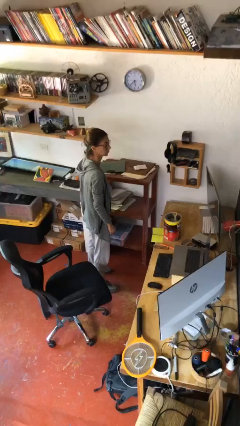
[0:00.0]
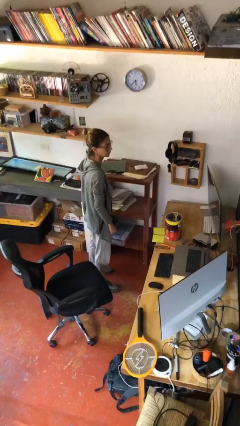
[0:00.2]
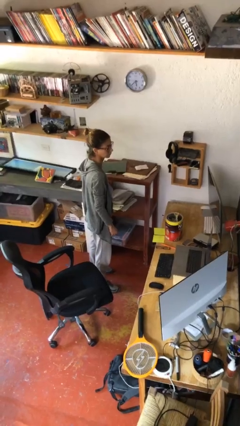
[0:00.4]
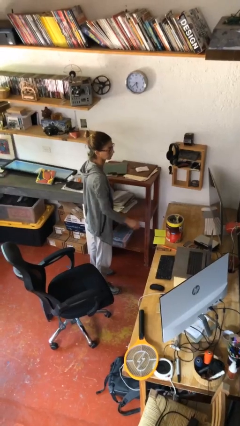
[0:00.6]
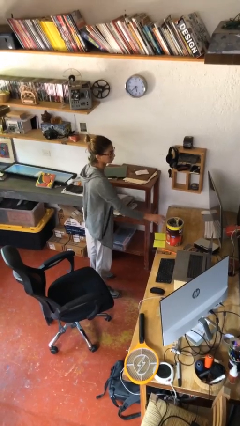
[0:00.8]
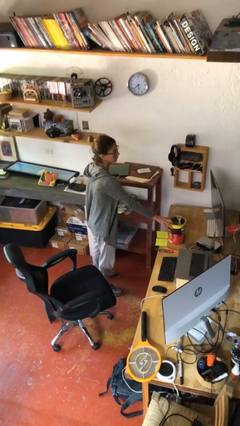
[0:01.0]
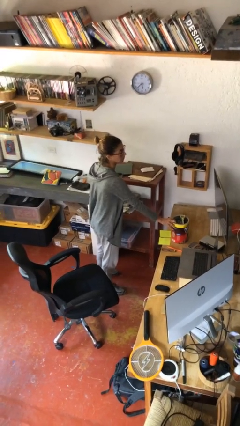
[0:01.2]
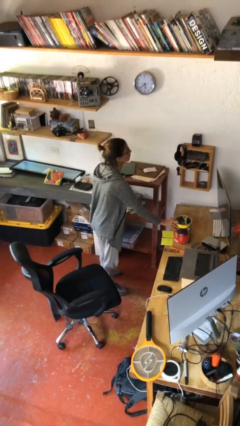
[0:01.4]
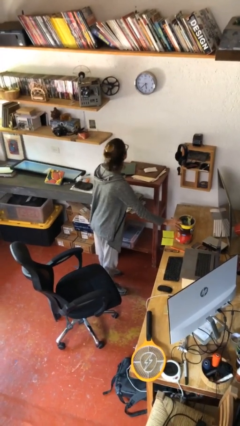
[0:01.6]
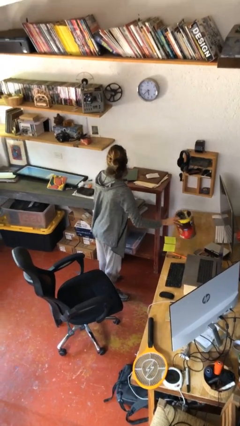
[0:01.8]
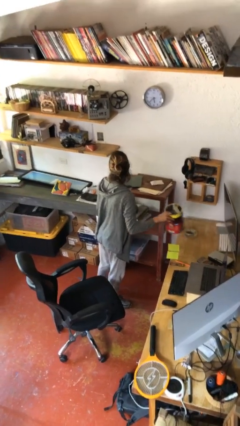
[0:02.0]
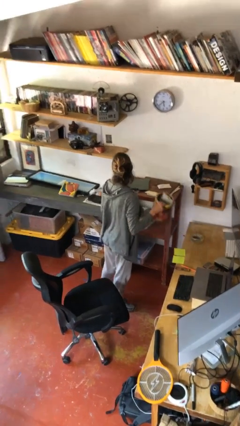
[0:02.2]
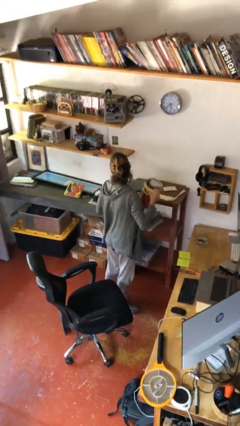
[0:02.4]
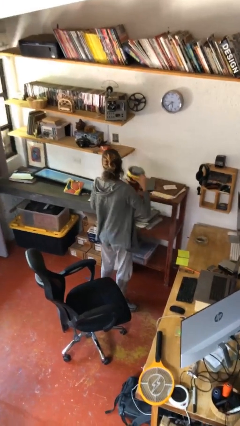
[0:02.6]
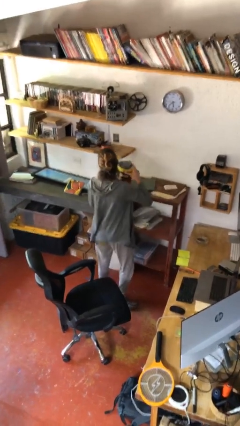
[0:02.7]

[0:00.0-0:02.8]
person picks up object from table

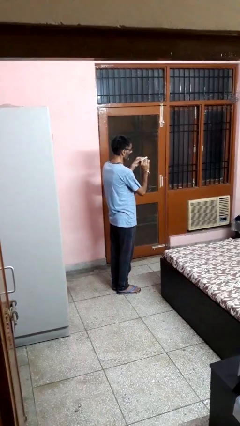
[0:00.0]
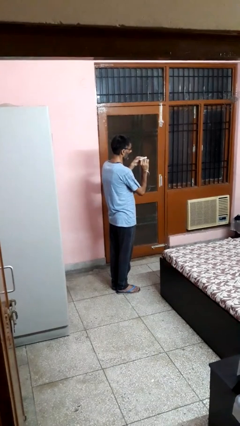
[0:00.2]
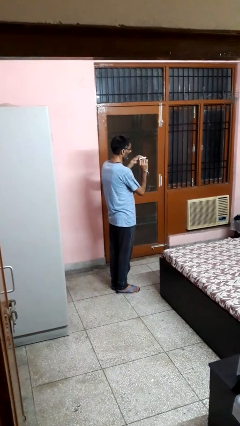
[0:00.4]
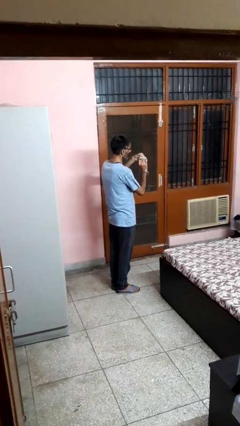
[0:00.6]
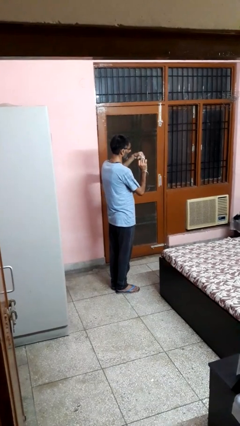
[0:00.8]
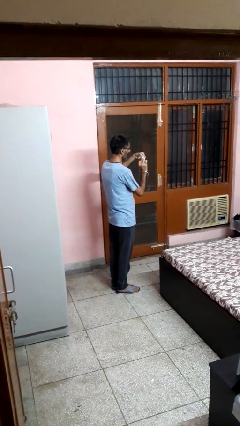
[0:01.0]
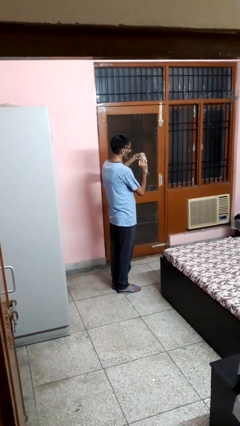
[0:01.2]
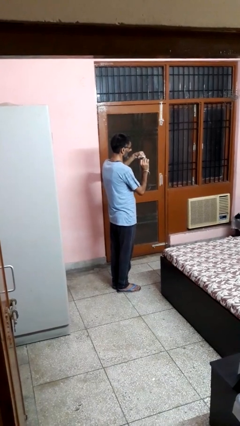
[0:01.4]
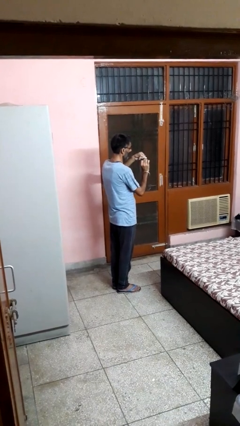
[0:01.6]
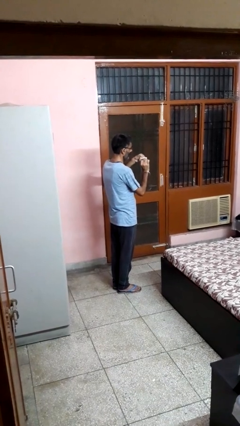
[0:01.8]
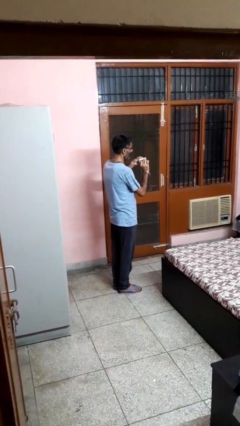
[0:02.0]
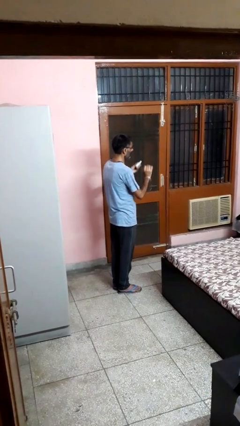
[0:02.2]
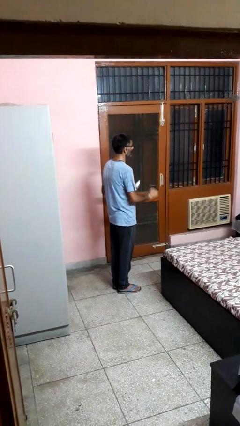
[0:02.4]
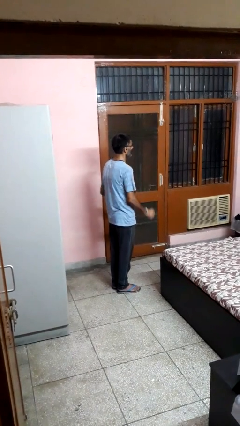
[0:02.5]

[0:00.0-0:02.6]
person files fingernails

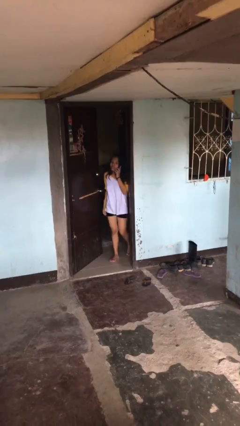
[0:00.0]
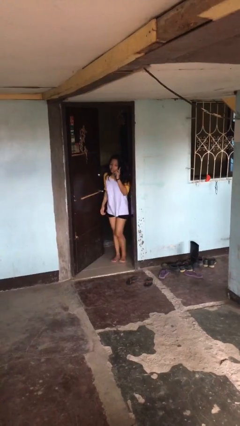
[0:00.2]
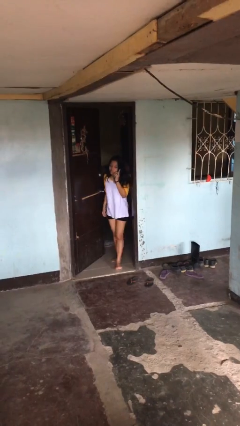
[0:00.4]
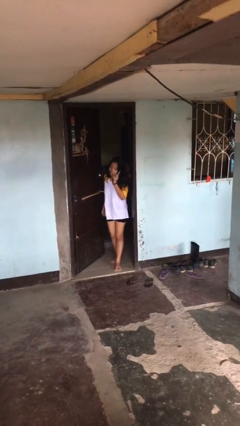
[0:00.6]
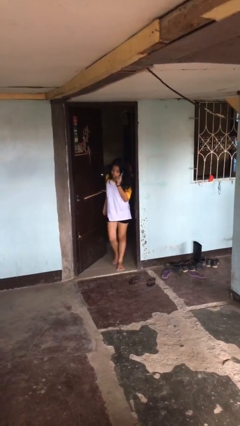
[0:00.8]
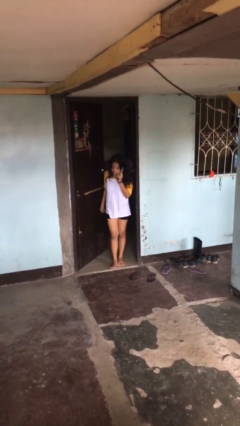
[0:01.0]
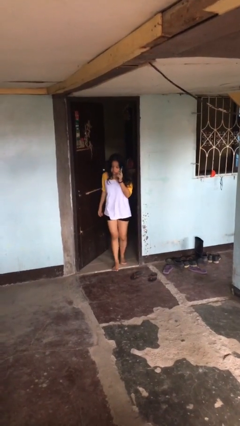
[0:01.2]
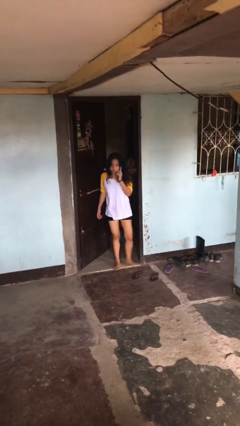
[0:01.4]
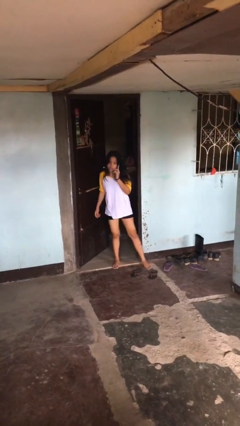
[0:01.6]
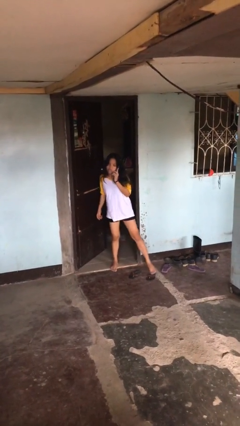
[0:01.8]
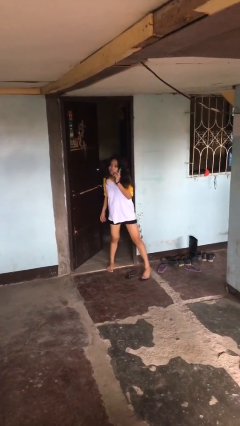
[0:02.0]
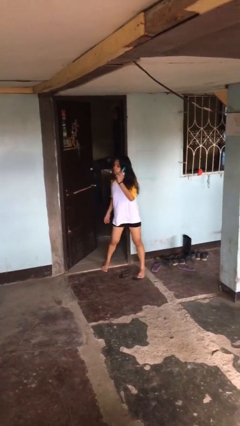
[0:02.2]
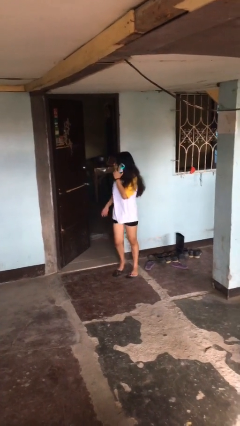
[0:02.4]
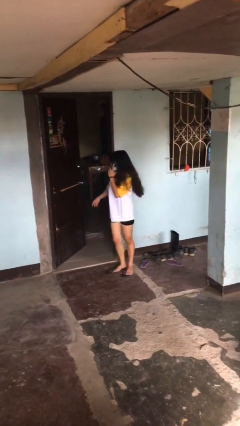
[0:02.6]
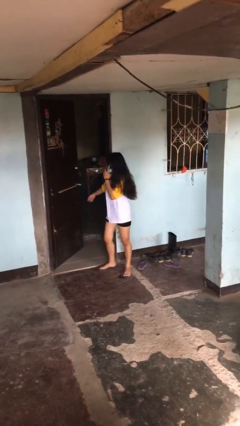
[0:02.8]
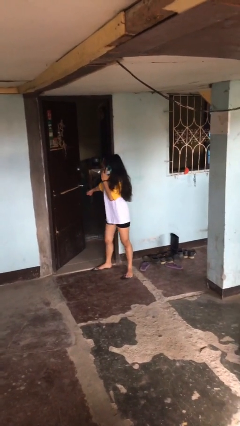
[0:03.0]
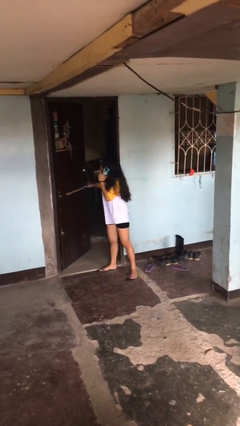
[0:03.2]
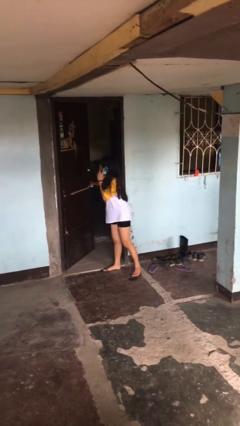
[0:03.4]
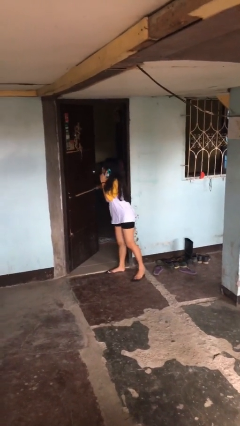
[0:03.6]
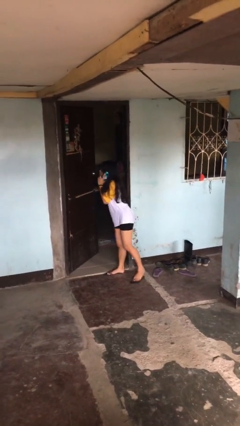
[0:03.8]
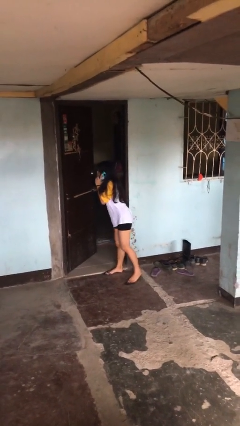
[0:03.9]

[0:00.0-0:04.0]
person enters scene through structure

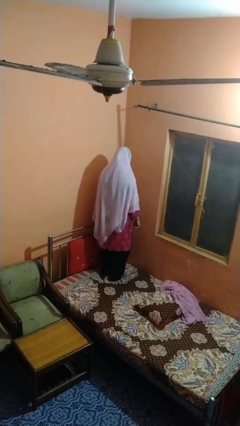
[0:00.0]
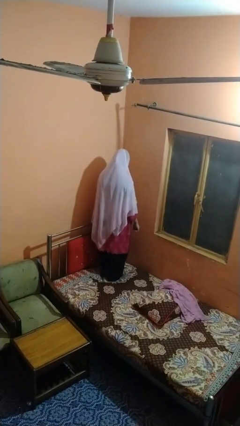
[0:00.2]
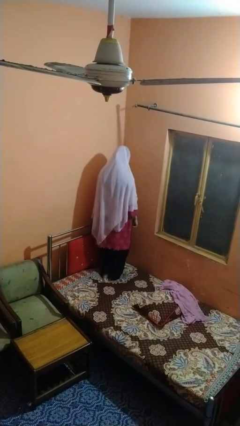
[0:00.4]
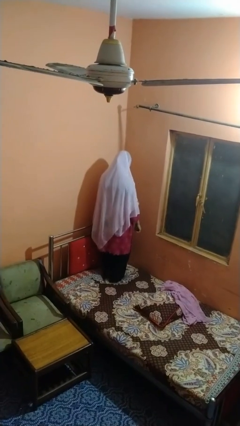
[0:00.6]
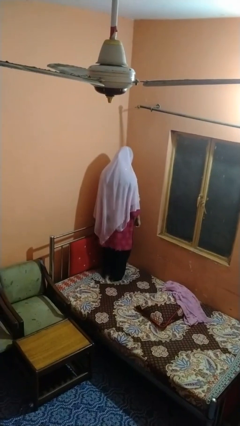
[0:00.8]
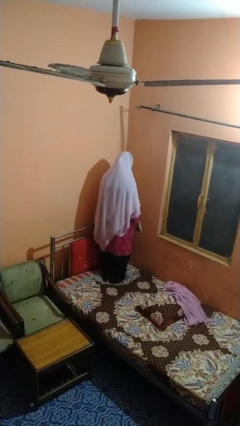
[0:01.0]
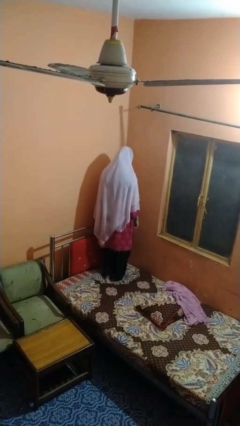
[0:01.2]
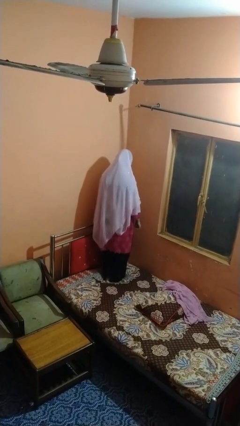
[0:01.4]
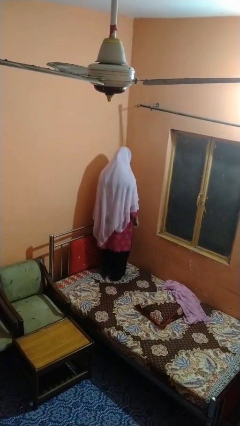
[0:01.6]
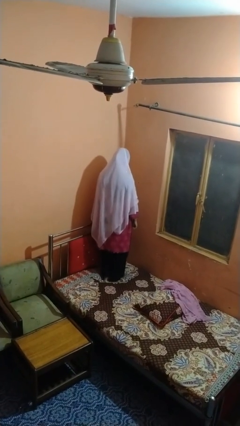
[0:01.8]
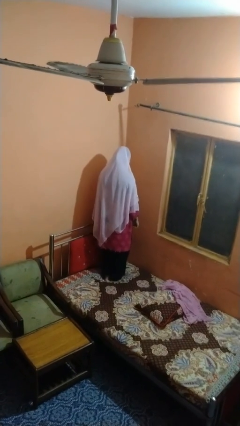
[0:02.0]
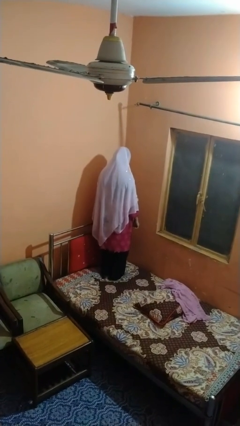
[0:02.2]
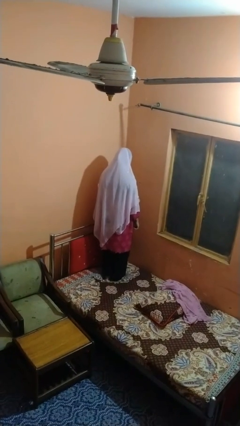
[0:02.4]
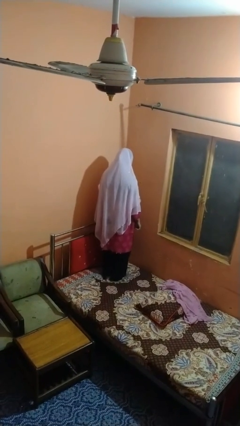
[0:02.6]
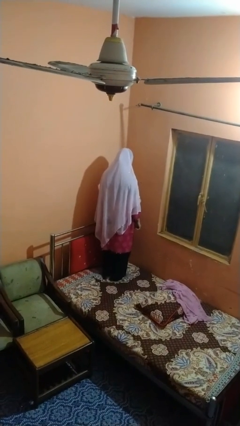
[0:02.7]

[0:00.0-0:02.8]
person jumps on bed

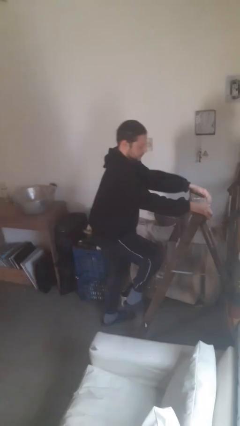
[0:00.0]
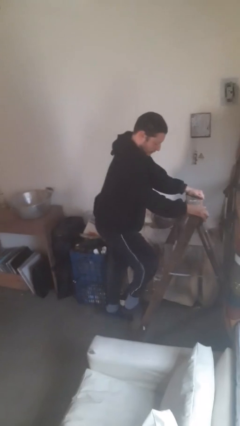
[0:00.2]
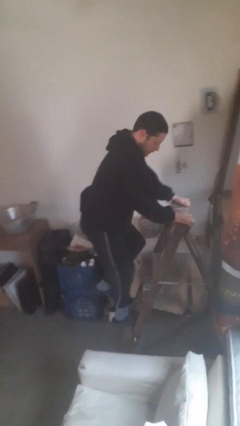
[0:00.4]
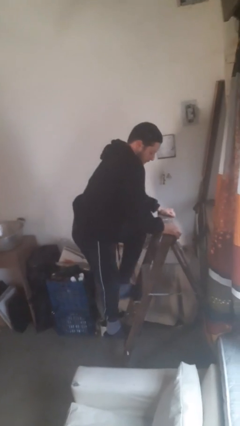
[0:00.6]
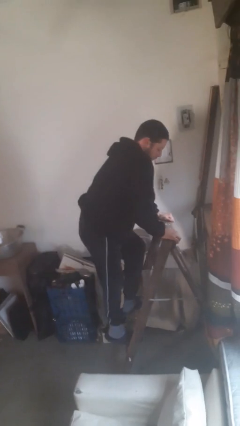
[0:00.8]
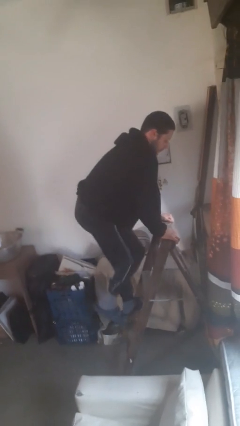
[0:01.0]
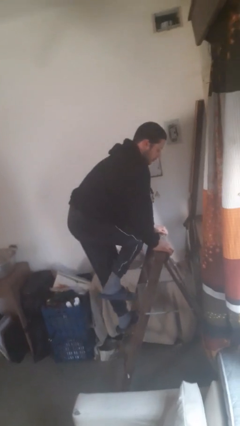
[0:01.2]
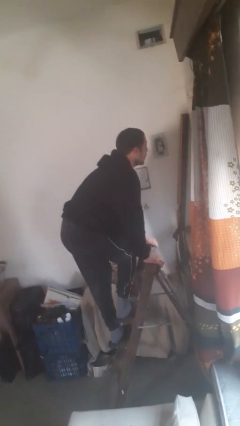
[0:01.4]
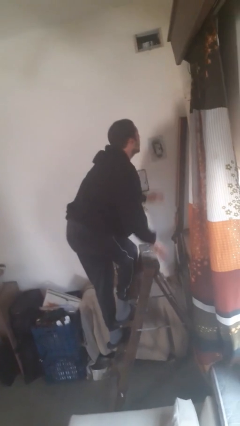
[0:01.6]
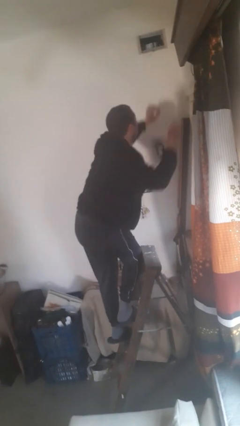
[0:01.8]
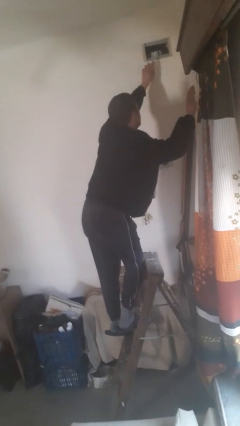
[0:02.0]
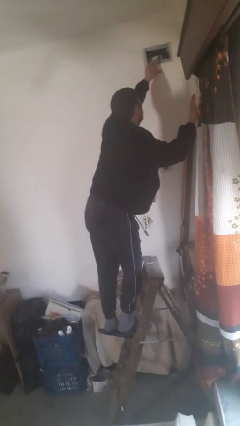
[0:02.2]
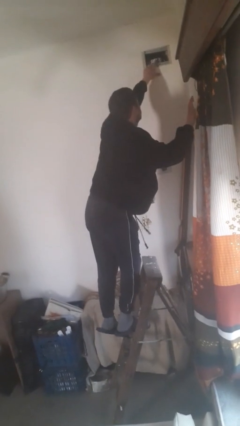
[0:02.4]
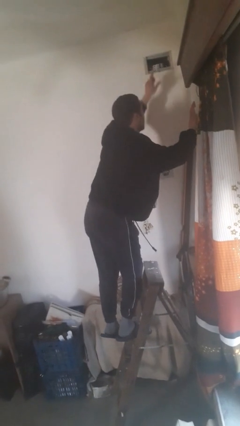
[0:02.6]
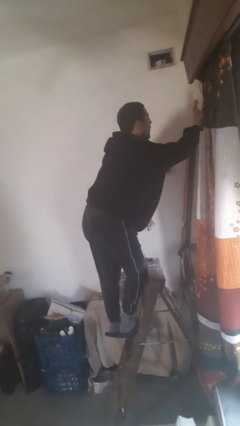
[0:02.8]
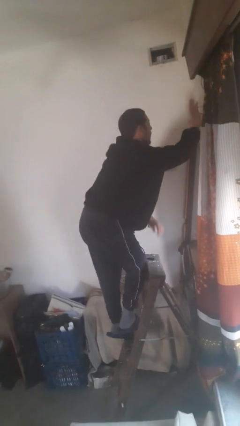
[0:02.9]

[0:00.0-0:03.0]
person climbs up ladder

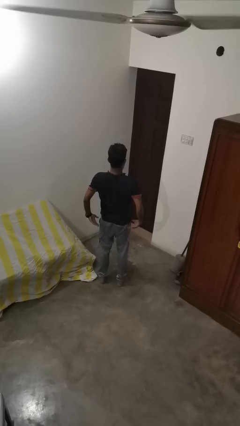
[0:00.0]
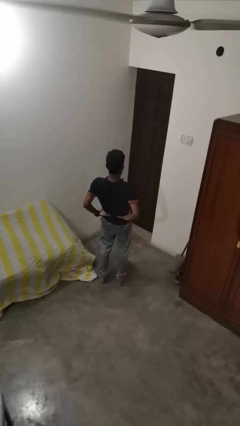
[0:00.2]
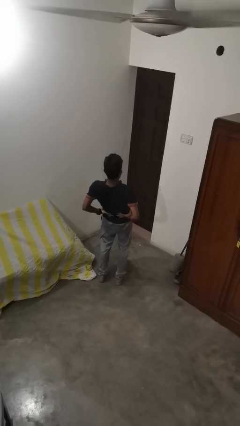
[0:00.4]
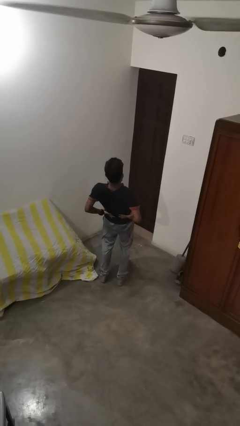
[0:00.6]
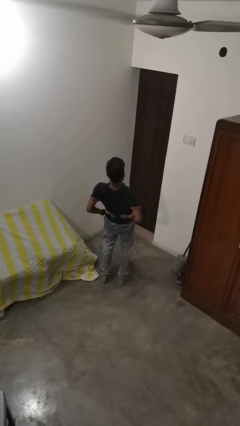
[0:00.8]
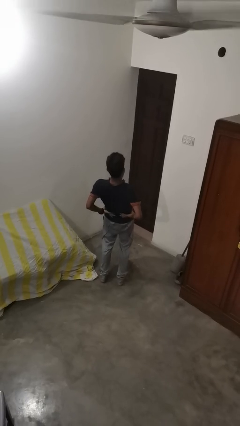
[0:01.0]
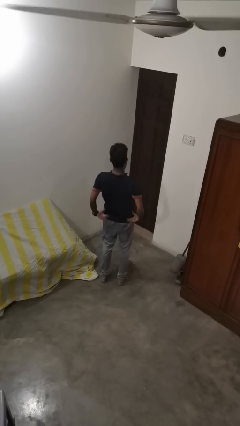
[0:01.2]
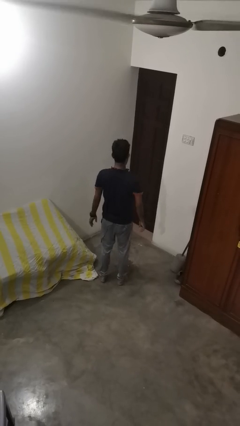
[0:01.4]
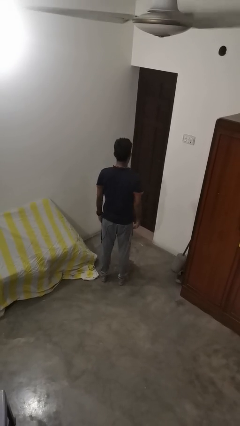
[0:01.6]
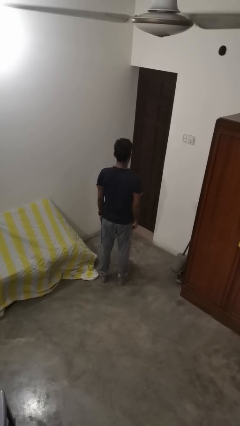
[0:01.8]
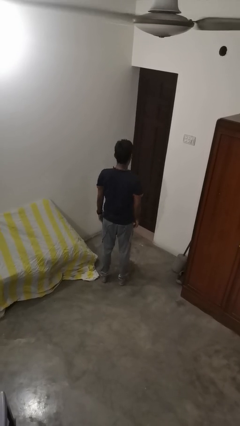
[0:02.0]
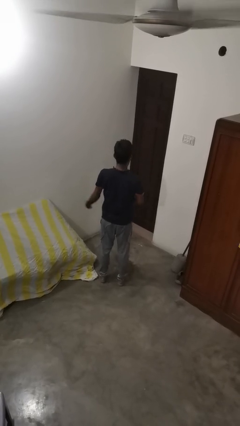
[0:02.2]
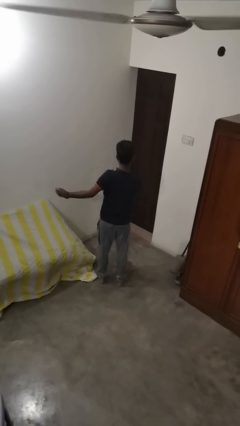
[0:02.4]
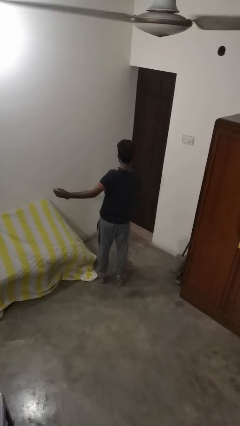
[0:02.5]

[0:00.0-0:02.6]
person stretches back
